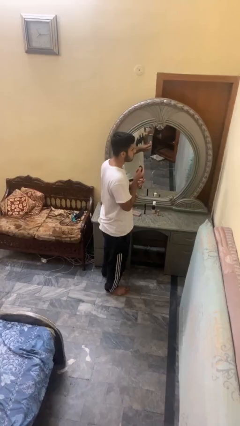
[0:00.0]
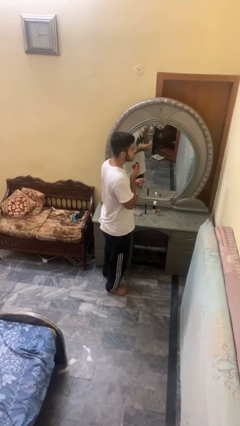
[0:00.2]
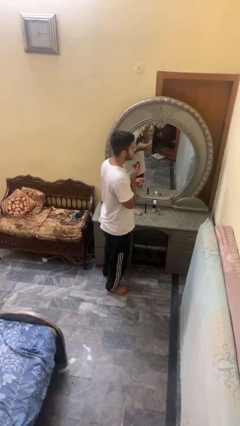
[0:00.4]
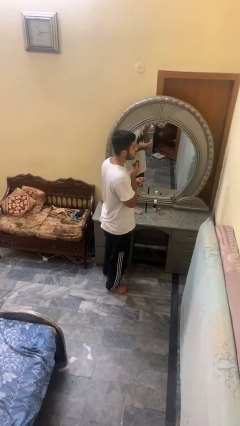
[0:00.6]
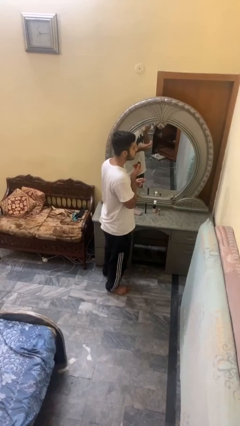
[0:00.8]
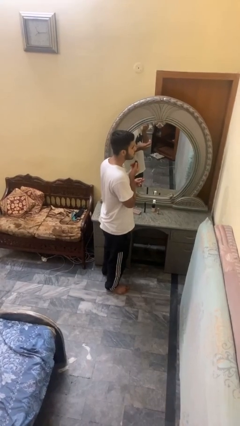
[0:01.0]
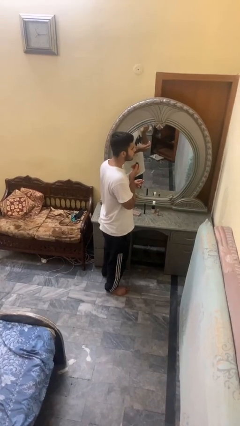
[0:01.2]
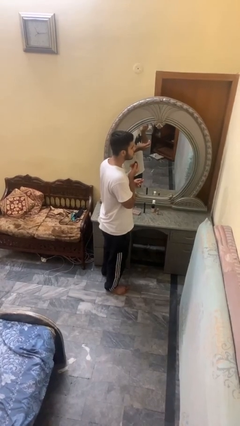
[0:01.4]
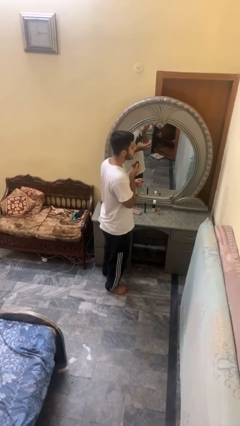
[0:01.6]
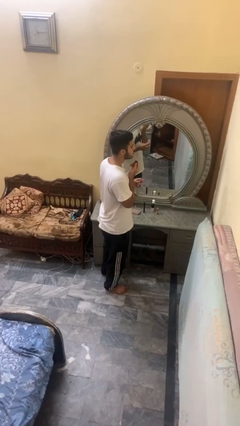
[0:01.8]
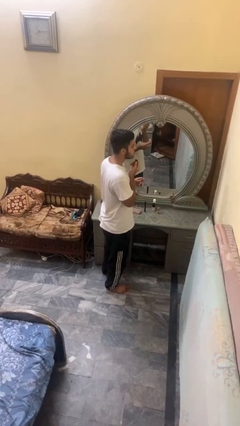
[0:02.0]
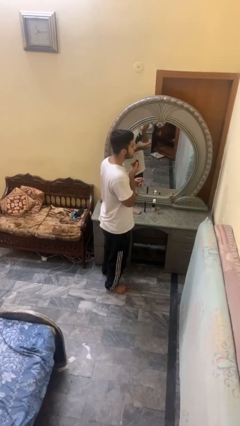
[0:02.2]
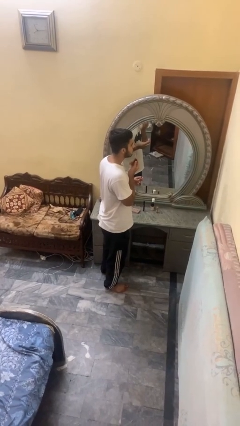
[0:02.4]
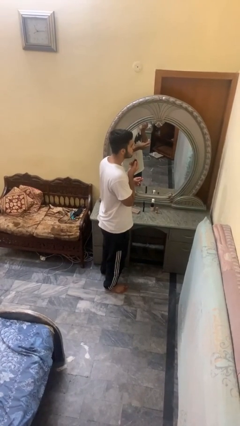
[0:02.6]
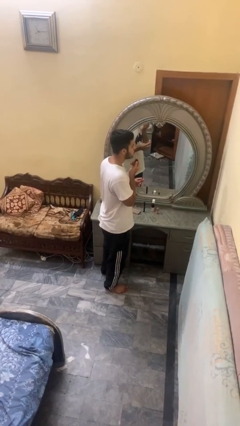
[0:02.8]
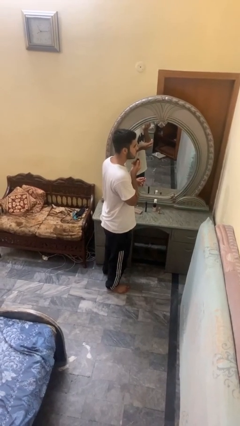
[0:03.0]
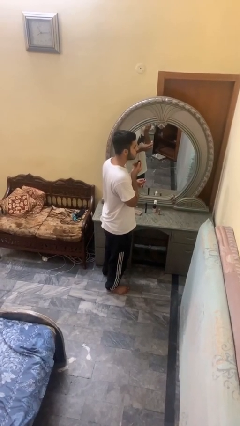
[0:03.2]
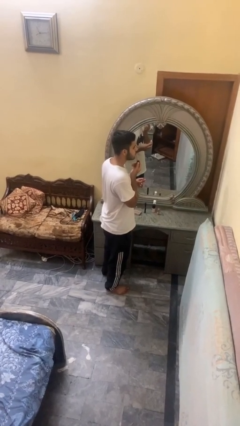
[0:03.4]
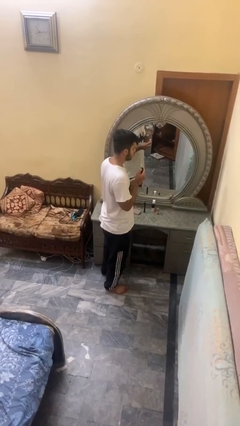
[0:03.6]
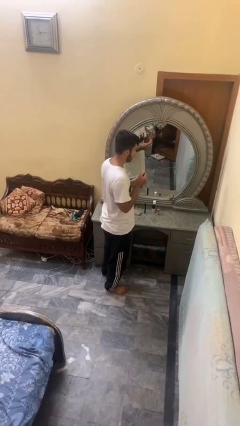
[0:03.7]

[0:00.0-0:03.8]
person applies lip makeup

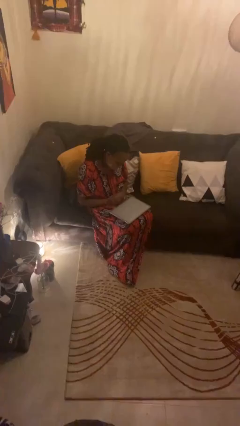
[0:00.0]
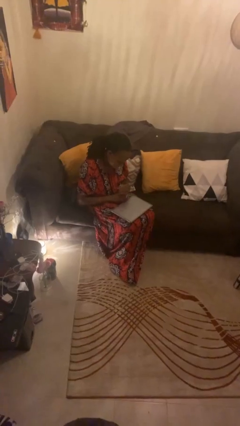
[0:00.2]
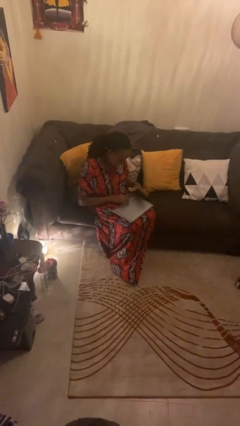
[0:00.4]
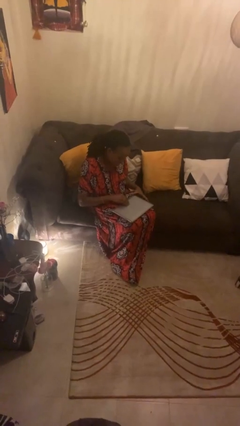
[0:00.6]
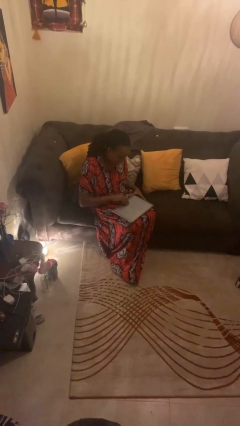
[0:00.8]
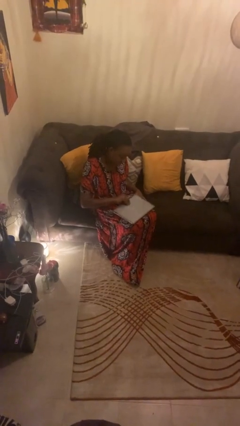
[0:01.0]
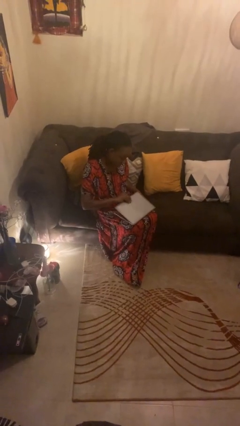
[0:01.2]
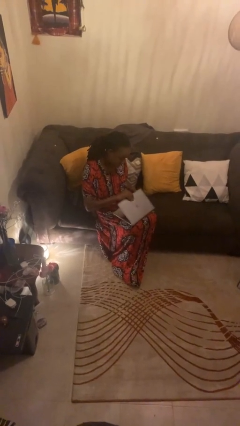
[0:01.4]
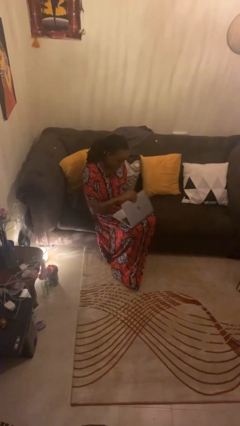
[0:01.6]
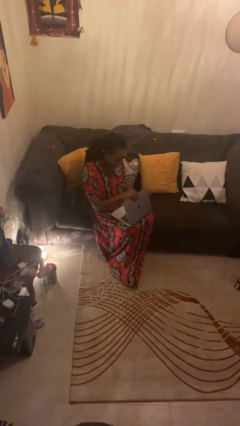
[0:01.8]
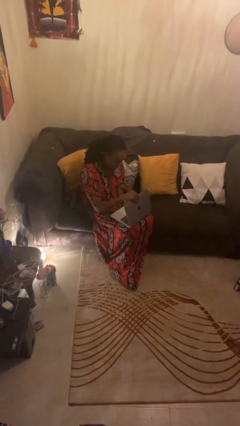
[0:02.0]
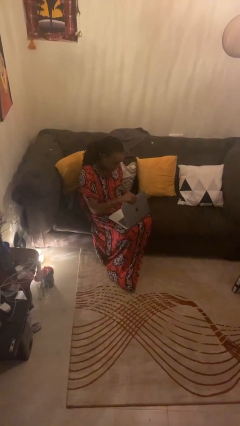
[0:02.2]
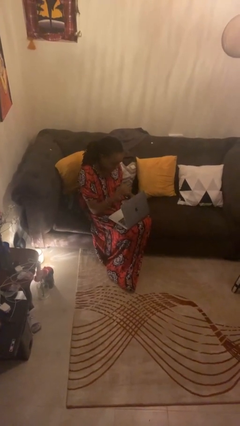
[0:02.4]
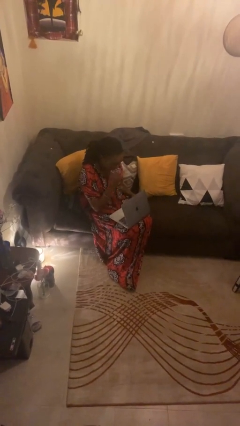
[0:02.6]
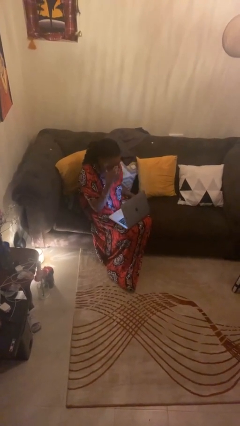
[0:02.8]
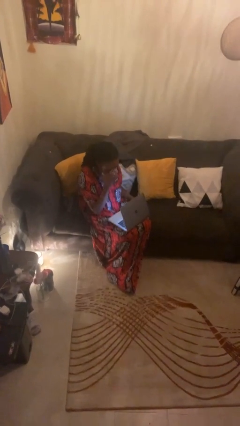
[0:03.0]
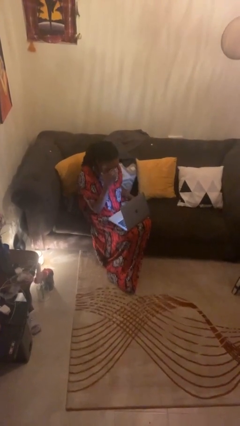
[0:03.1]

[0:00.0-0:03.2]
person opens laptop

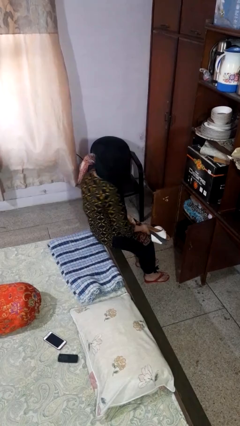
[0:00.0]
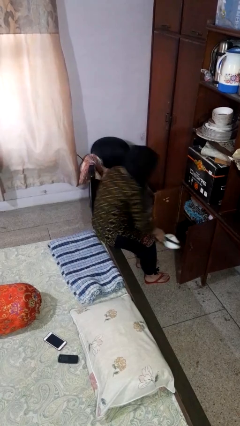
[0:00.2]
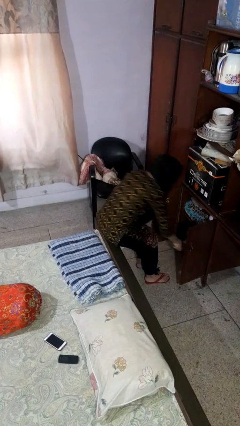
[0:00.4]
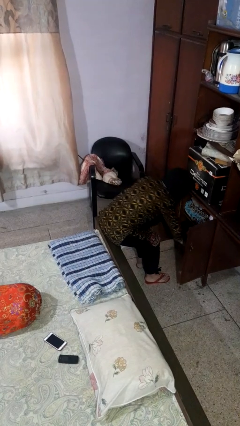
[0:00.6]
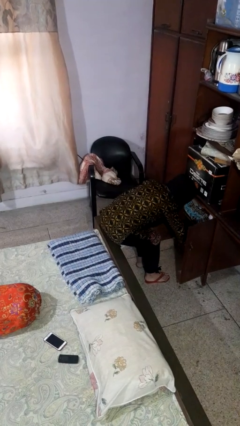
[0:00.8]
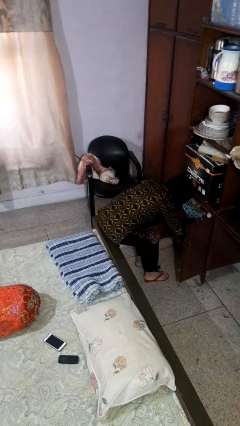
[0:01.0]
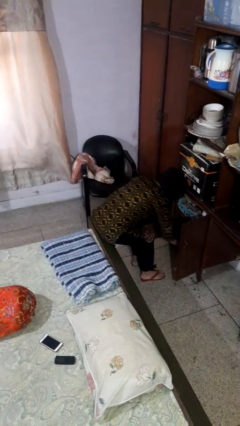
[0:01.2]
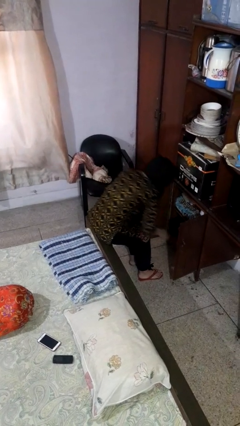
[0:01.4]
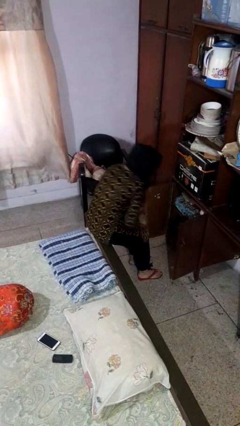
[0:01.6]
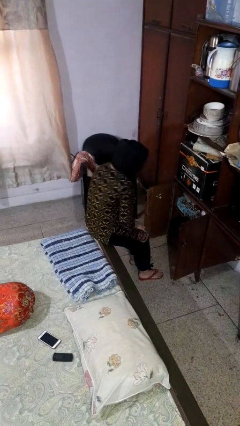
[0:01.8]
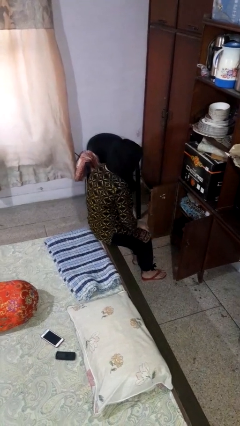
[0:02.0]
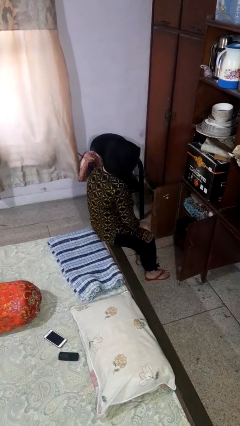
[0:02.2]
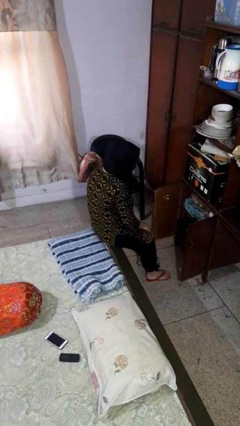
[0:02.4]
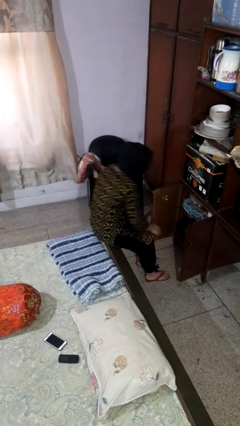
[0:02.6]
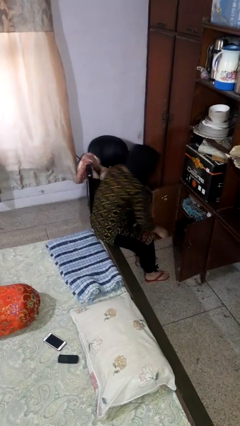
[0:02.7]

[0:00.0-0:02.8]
person puts object in cabinet

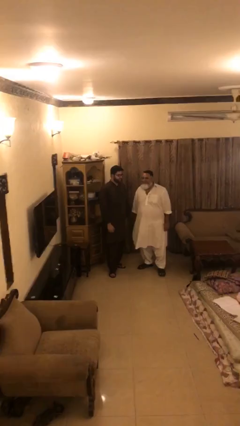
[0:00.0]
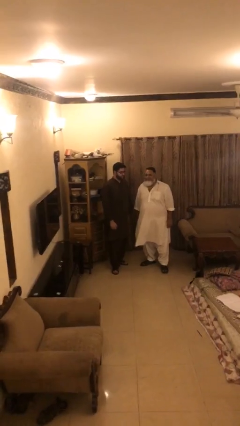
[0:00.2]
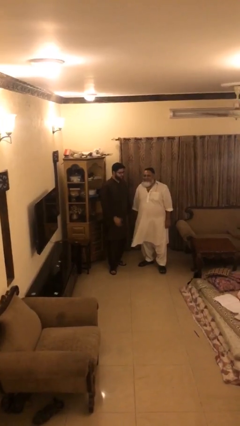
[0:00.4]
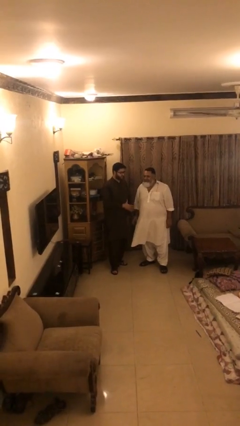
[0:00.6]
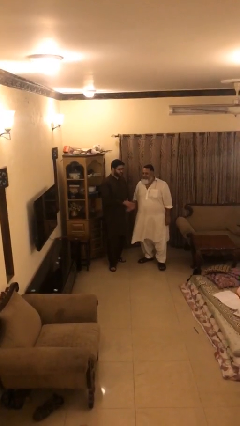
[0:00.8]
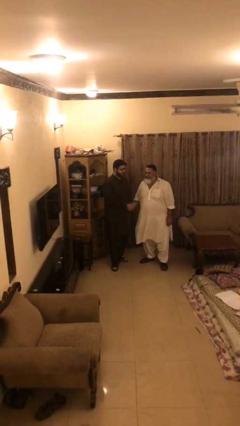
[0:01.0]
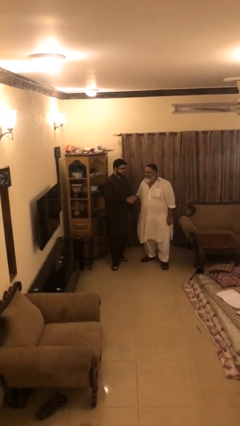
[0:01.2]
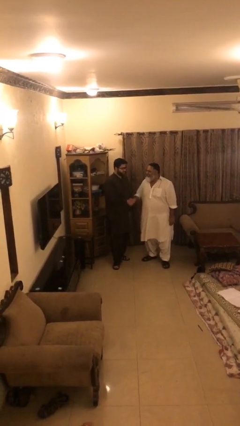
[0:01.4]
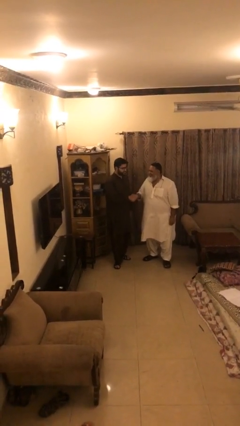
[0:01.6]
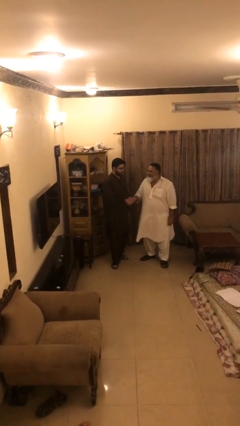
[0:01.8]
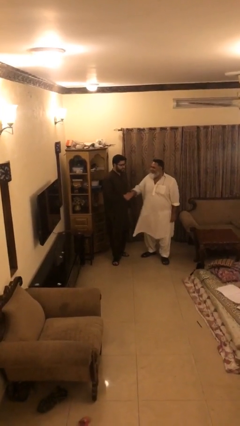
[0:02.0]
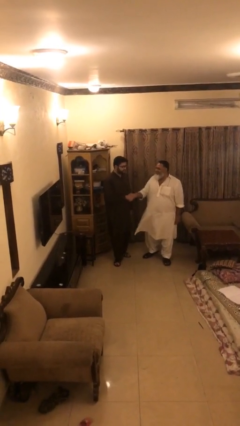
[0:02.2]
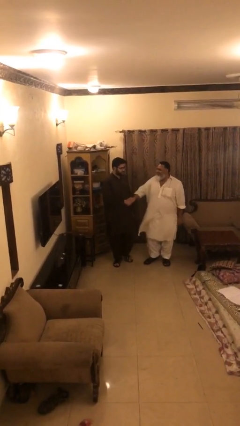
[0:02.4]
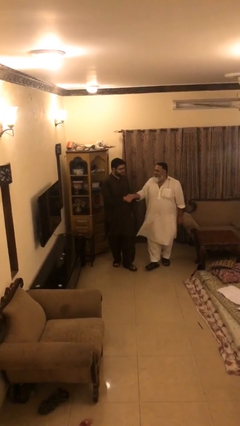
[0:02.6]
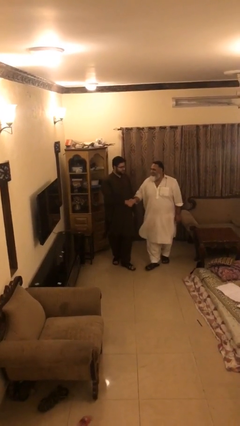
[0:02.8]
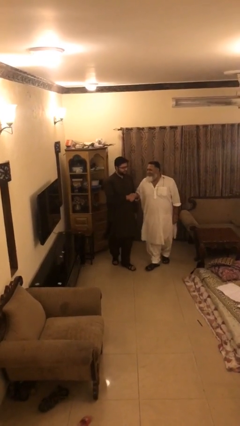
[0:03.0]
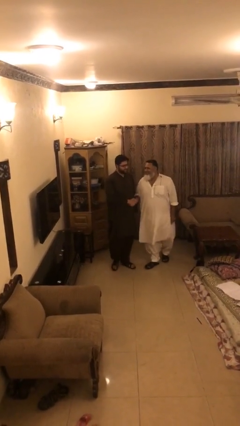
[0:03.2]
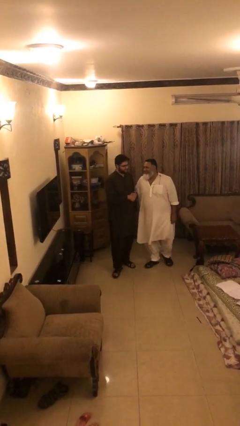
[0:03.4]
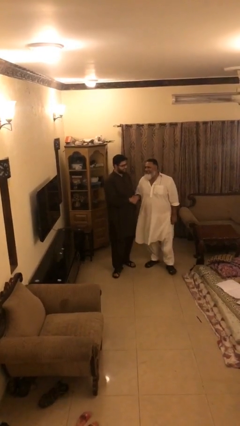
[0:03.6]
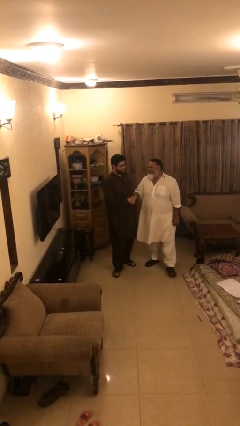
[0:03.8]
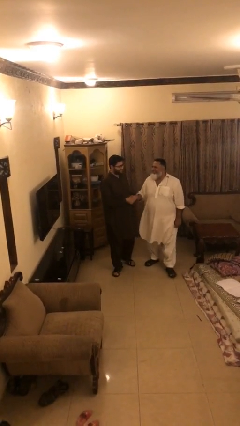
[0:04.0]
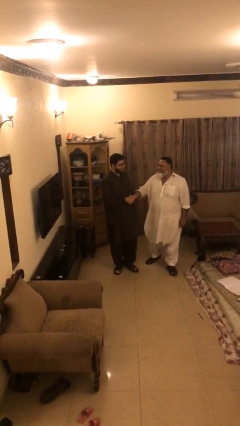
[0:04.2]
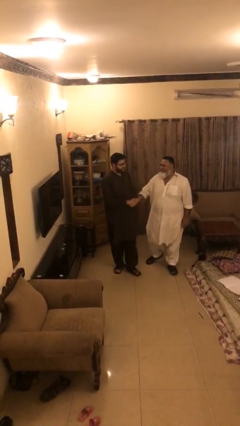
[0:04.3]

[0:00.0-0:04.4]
person holds hand

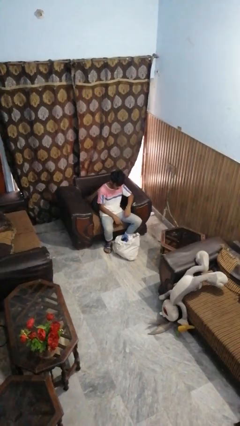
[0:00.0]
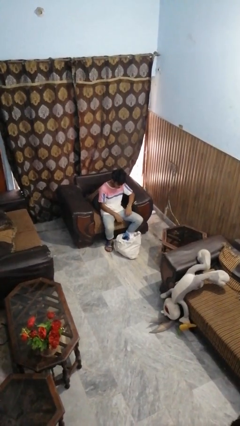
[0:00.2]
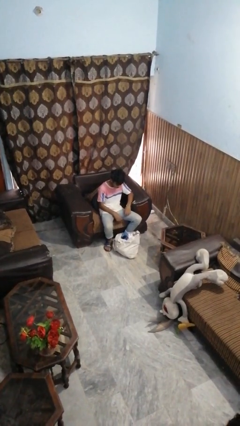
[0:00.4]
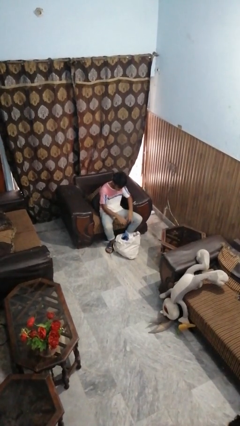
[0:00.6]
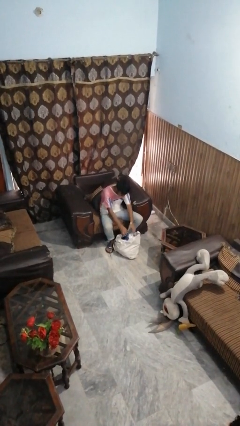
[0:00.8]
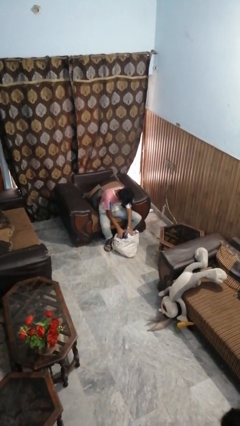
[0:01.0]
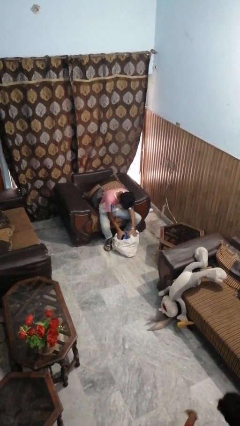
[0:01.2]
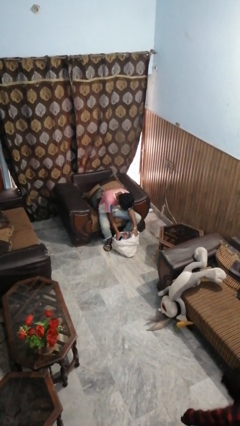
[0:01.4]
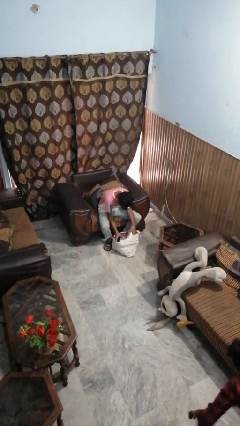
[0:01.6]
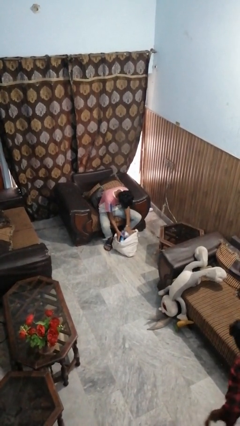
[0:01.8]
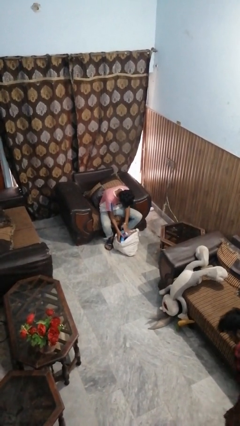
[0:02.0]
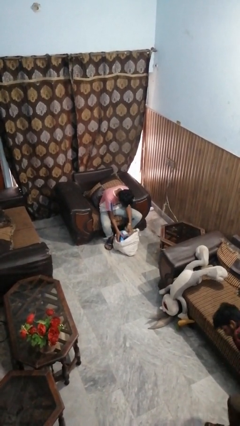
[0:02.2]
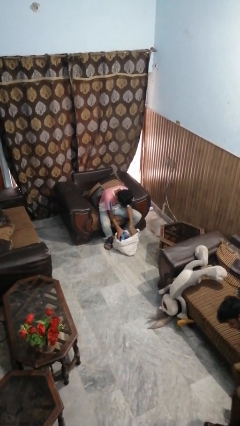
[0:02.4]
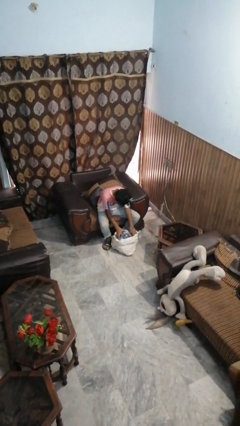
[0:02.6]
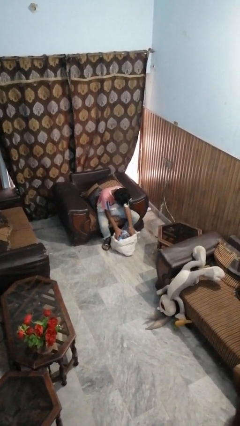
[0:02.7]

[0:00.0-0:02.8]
person searches in bag

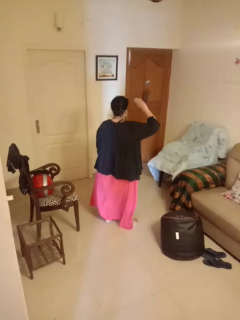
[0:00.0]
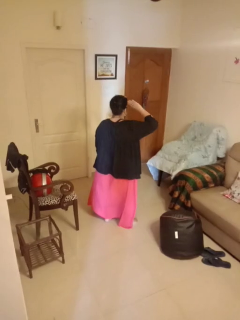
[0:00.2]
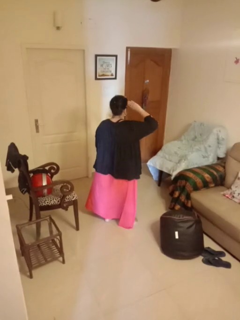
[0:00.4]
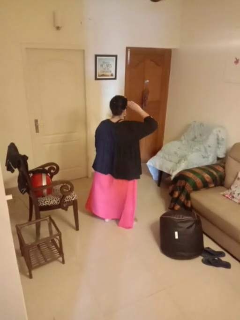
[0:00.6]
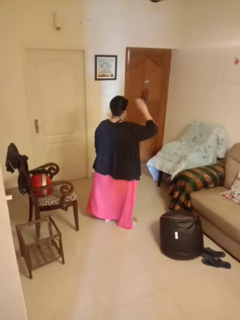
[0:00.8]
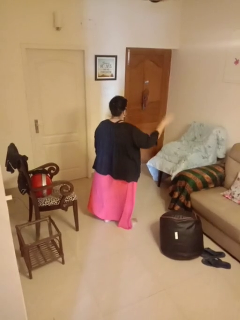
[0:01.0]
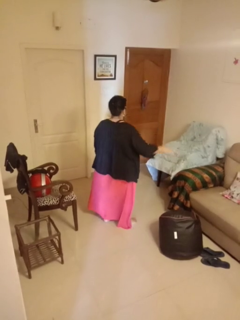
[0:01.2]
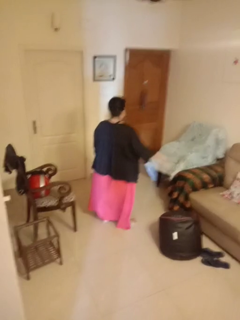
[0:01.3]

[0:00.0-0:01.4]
person salutes
